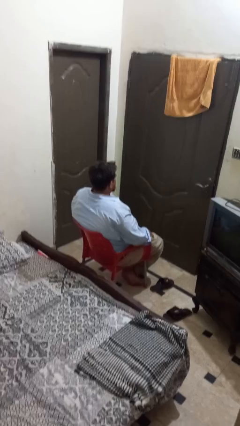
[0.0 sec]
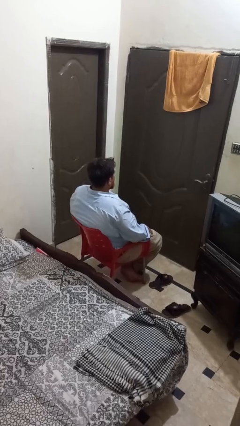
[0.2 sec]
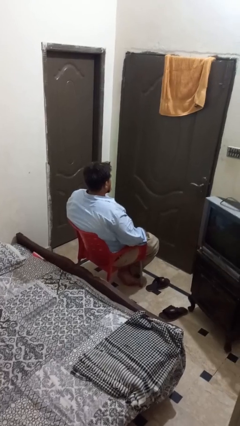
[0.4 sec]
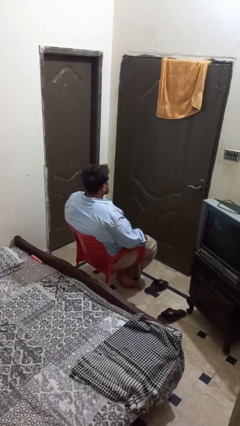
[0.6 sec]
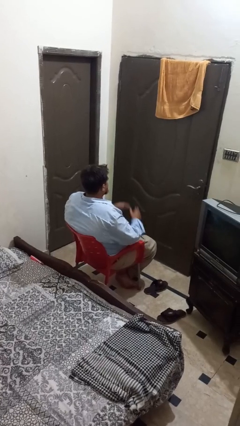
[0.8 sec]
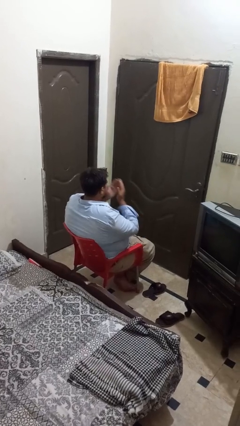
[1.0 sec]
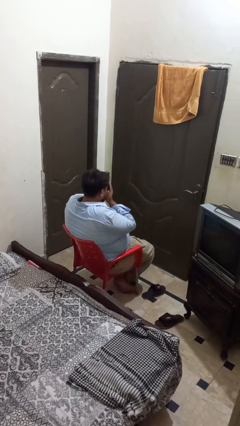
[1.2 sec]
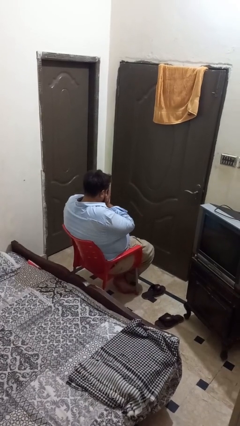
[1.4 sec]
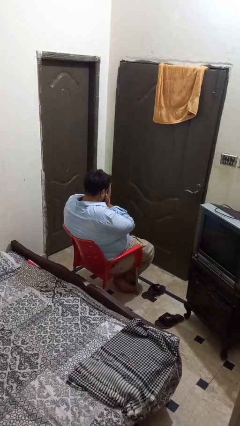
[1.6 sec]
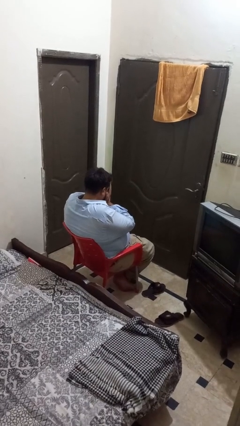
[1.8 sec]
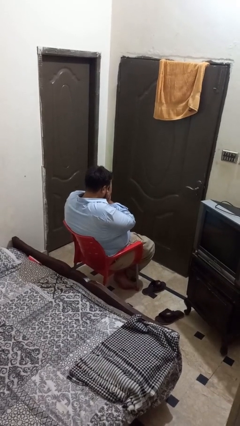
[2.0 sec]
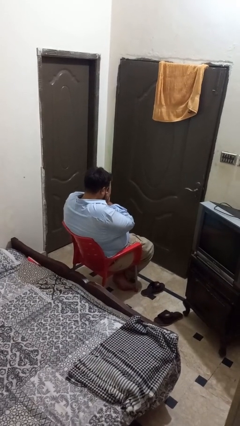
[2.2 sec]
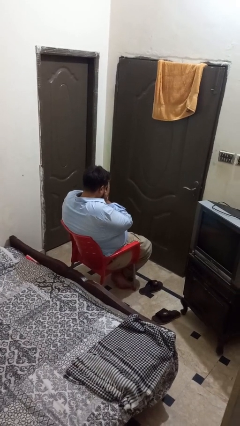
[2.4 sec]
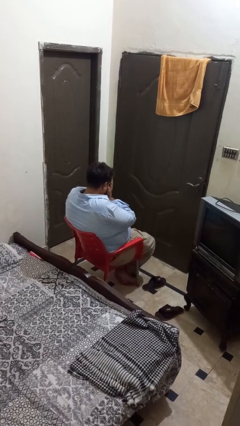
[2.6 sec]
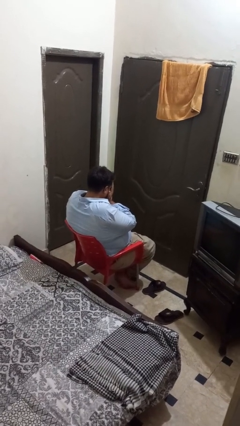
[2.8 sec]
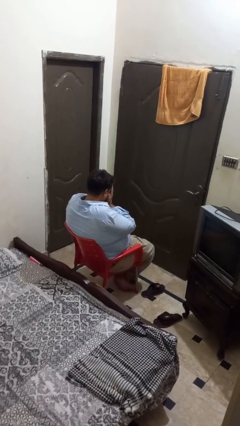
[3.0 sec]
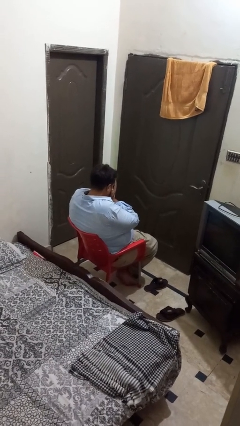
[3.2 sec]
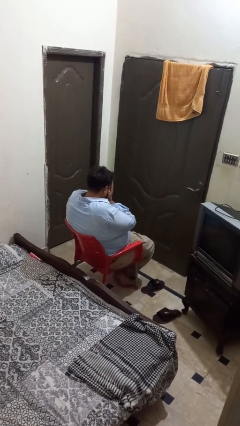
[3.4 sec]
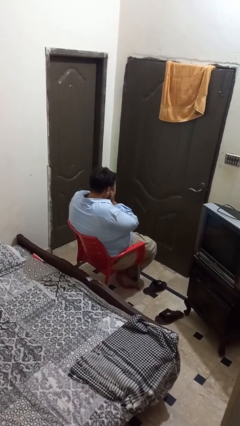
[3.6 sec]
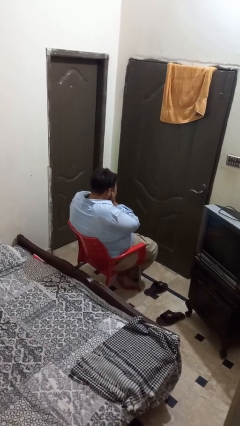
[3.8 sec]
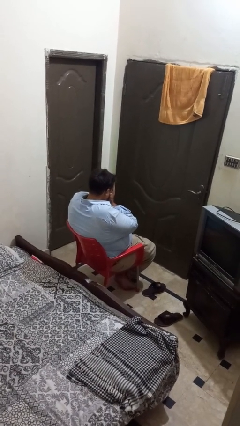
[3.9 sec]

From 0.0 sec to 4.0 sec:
person covers face with hands

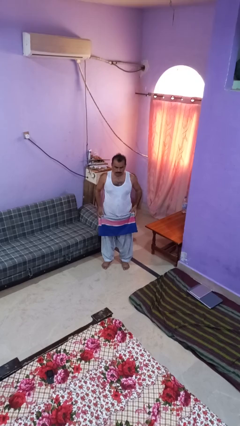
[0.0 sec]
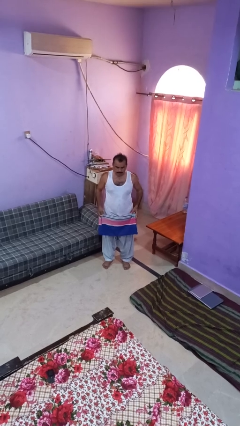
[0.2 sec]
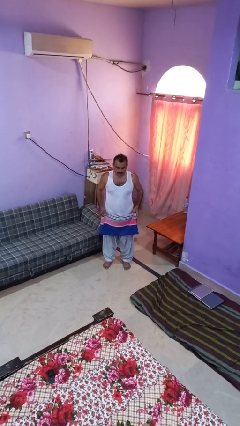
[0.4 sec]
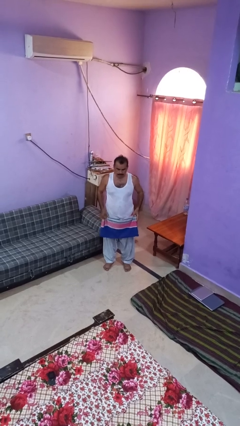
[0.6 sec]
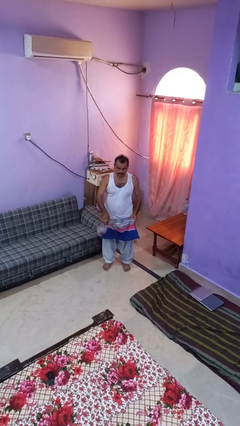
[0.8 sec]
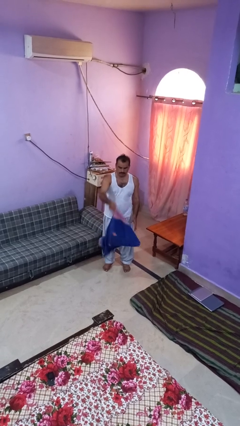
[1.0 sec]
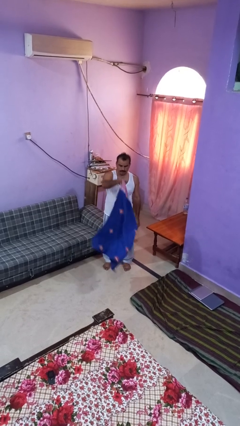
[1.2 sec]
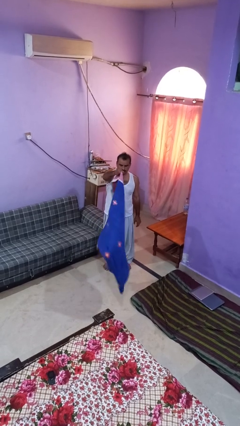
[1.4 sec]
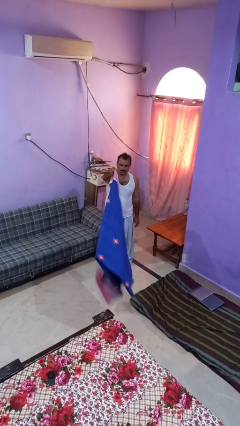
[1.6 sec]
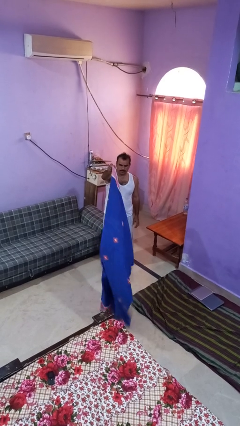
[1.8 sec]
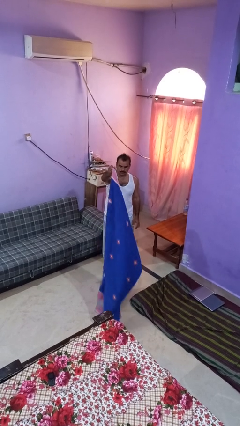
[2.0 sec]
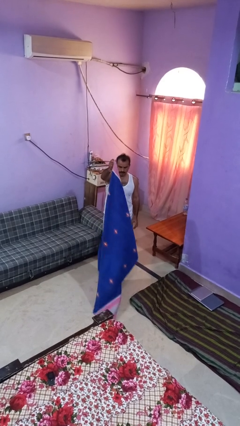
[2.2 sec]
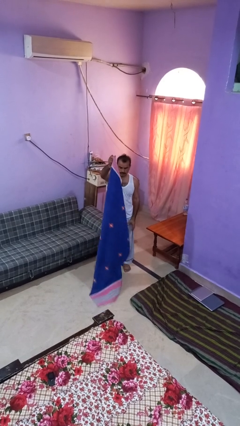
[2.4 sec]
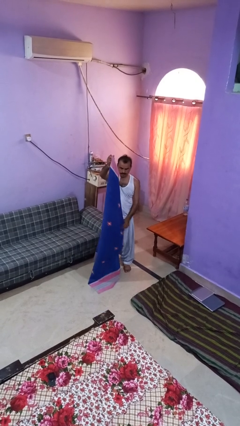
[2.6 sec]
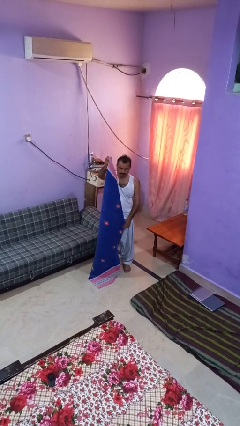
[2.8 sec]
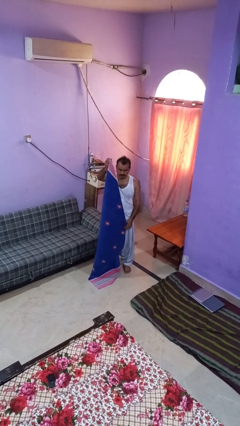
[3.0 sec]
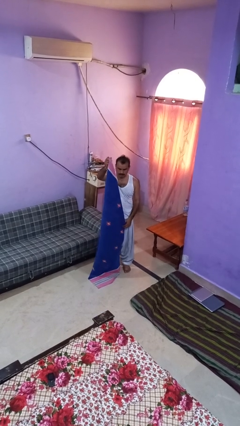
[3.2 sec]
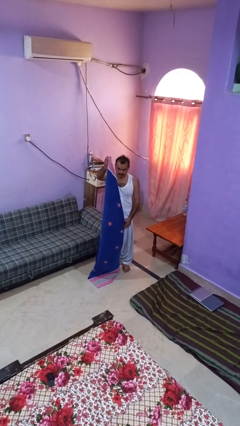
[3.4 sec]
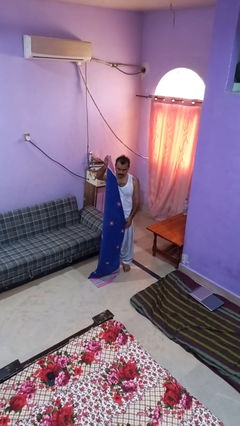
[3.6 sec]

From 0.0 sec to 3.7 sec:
person unfolds blanket

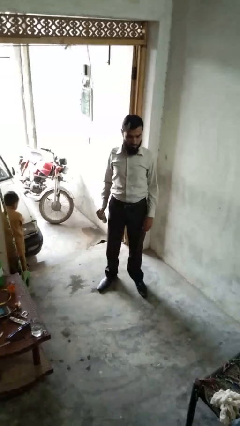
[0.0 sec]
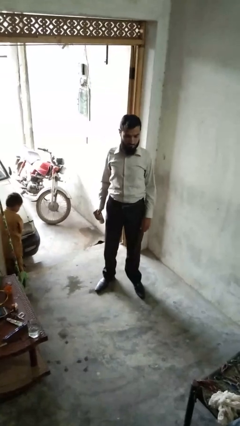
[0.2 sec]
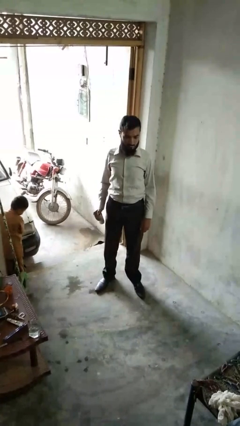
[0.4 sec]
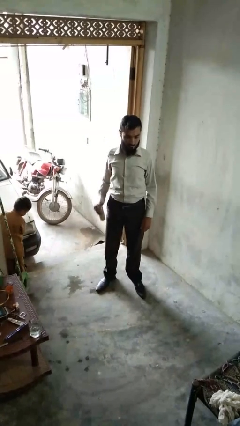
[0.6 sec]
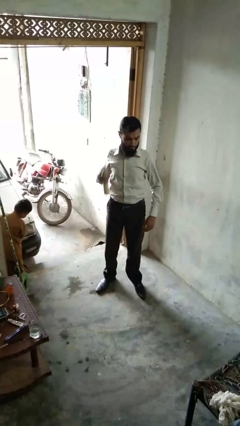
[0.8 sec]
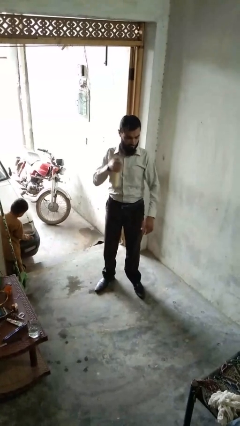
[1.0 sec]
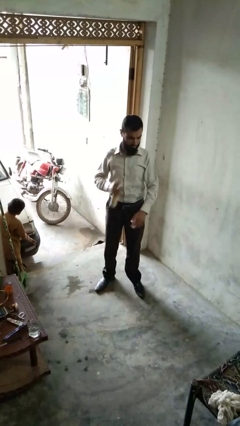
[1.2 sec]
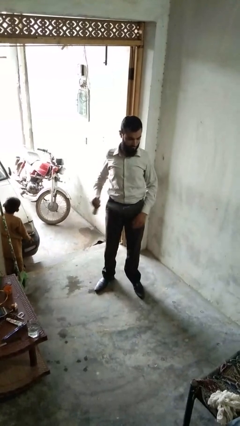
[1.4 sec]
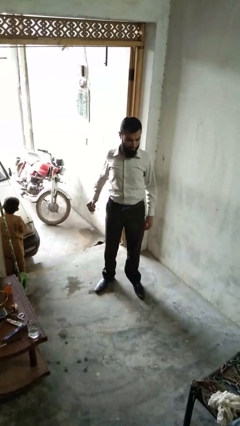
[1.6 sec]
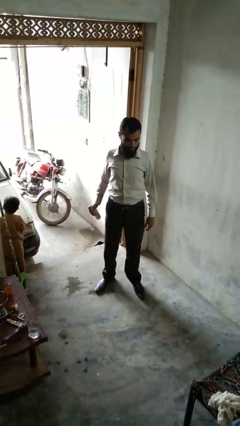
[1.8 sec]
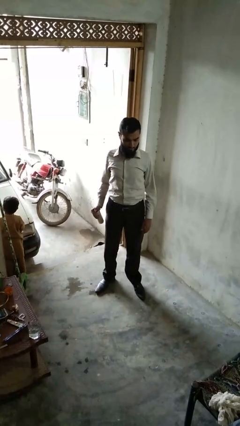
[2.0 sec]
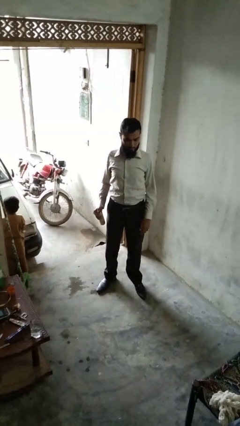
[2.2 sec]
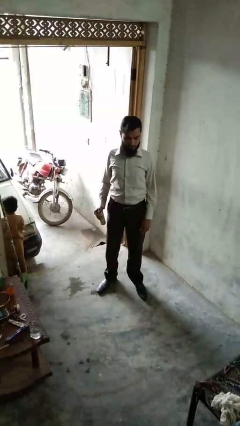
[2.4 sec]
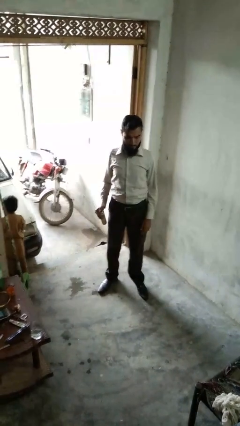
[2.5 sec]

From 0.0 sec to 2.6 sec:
person applies deodorant

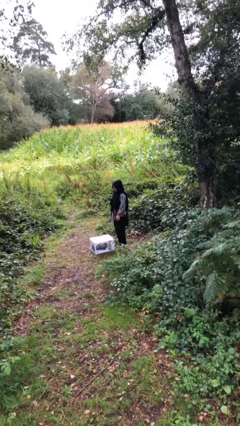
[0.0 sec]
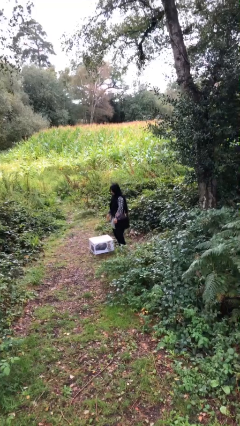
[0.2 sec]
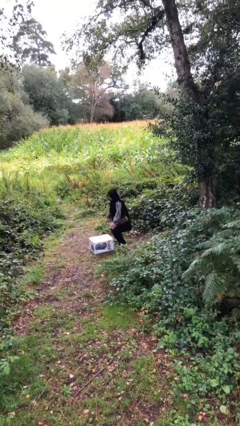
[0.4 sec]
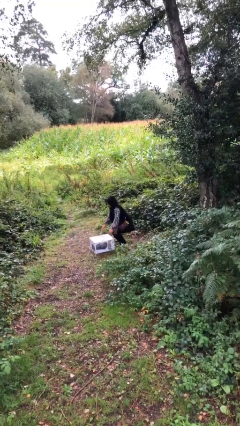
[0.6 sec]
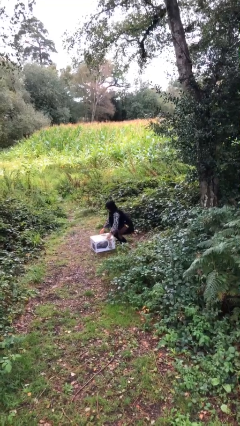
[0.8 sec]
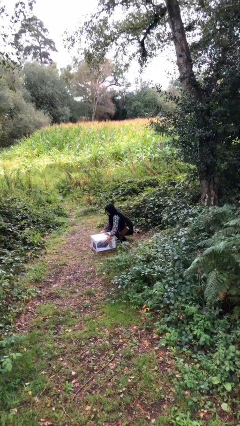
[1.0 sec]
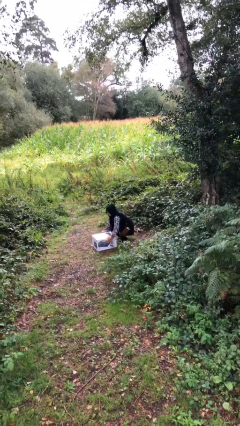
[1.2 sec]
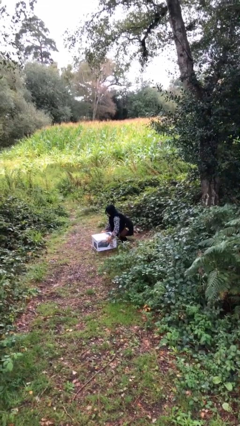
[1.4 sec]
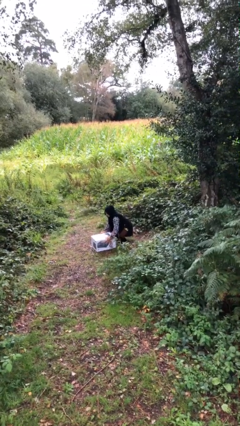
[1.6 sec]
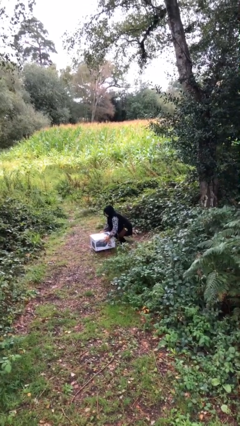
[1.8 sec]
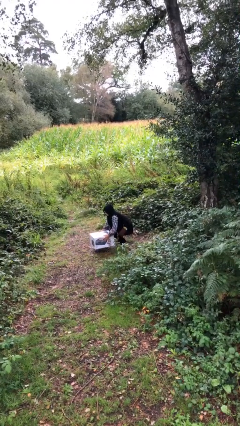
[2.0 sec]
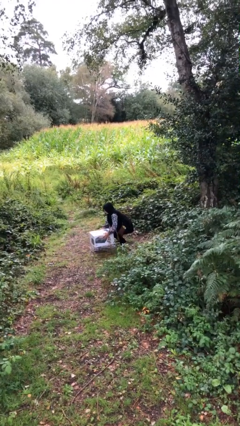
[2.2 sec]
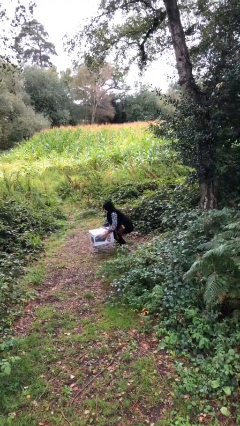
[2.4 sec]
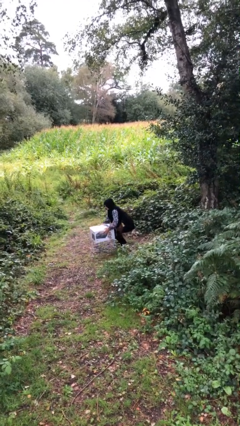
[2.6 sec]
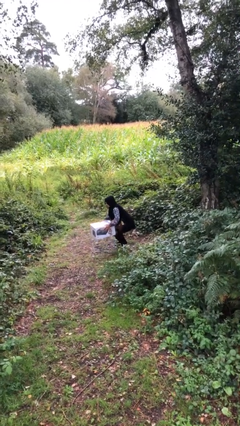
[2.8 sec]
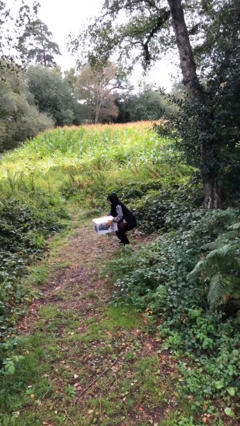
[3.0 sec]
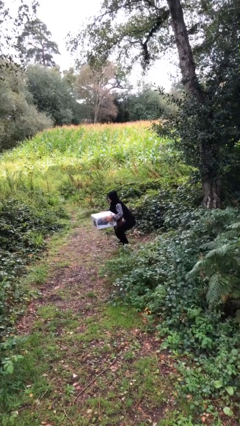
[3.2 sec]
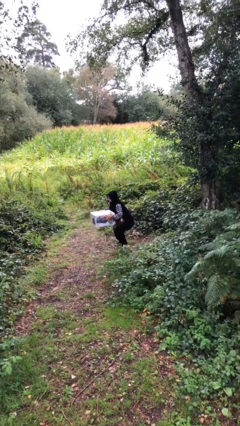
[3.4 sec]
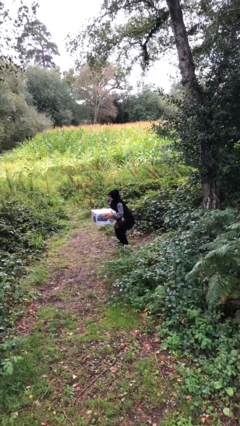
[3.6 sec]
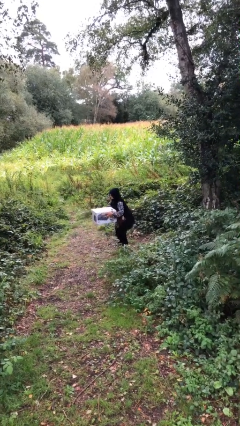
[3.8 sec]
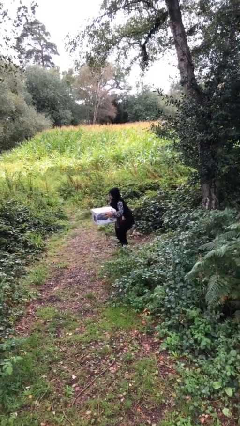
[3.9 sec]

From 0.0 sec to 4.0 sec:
person picks up object from floor

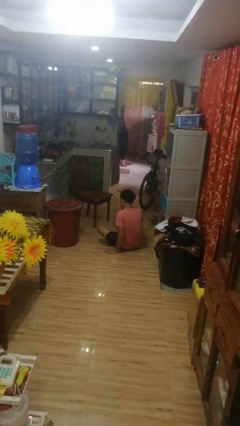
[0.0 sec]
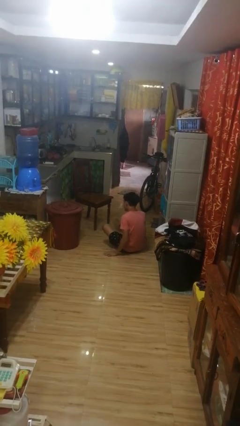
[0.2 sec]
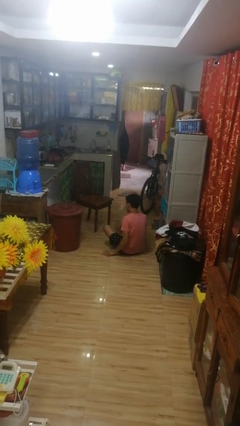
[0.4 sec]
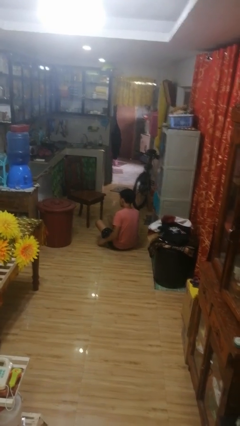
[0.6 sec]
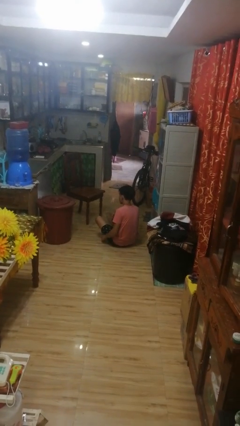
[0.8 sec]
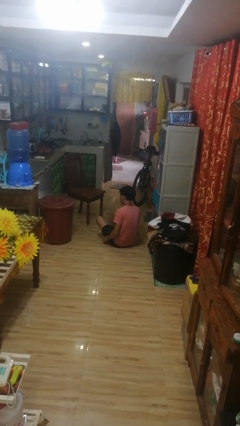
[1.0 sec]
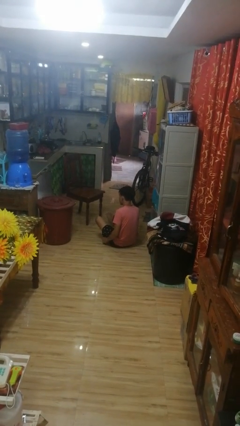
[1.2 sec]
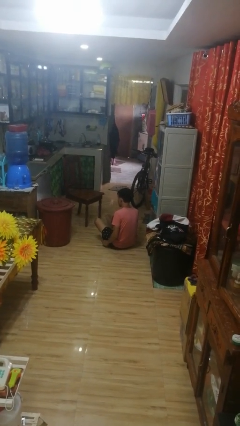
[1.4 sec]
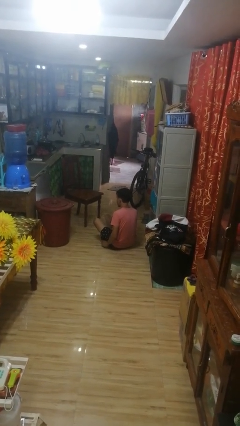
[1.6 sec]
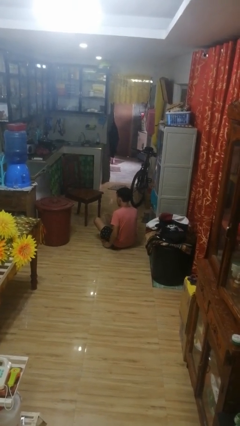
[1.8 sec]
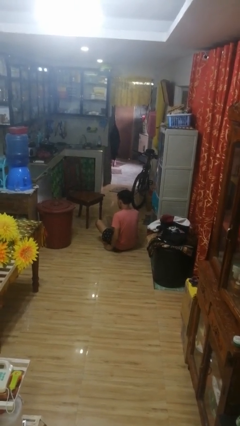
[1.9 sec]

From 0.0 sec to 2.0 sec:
person lies down on floor

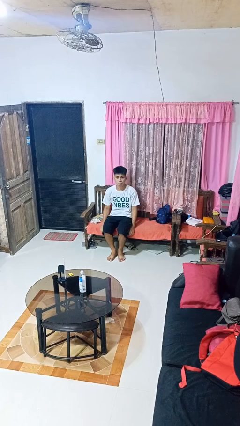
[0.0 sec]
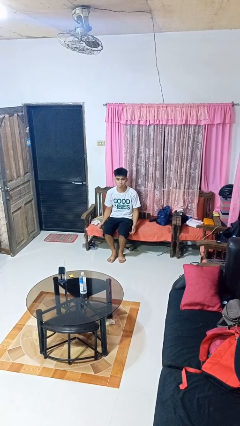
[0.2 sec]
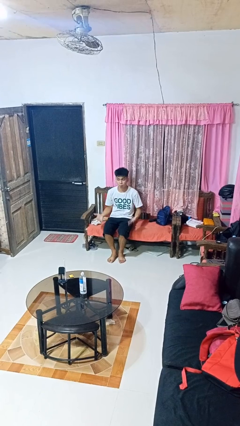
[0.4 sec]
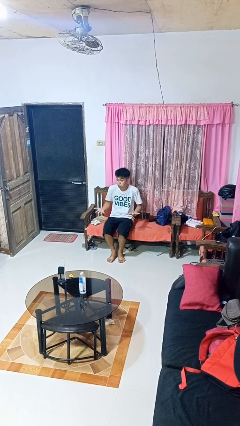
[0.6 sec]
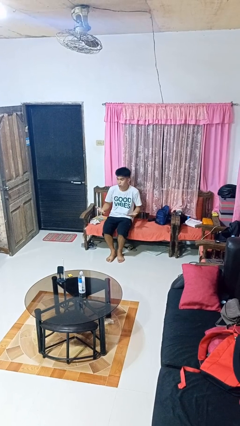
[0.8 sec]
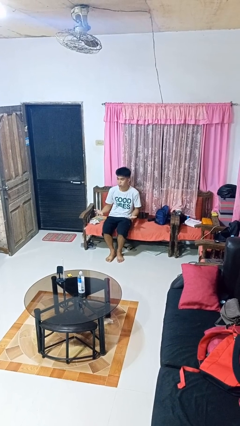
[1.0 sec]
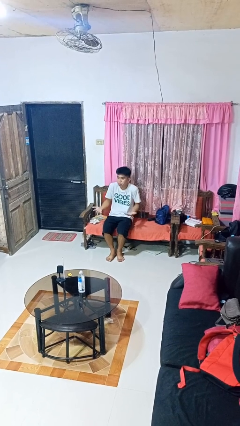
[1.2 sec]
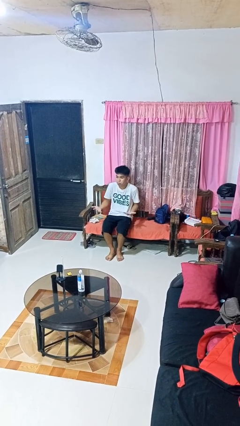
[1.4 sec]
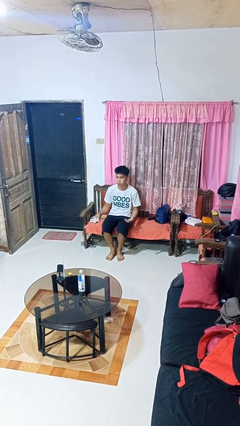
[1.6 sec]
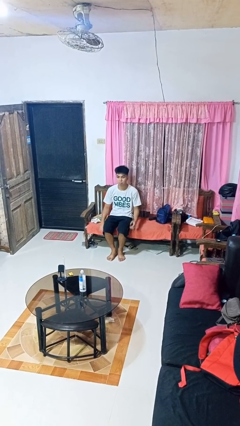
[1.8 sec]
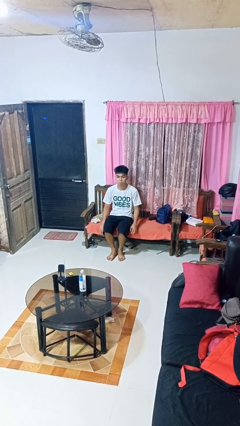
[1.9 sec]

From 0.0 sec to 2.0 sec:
person shrugs
